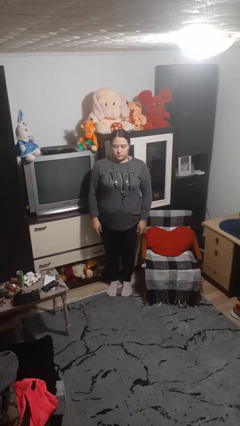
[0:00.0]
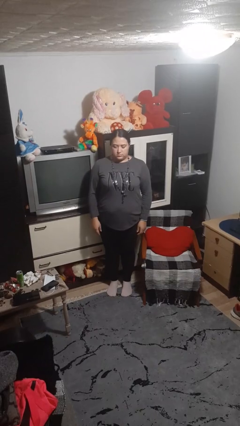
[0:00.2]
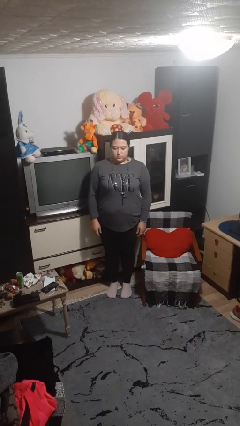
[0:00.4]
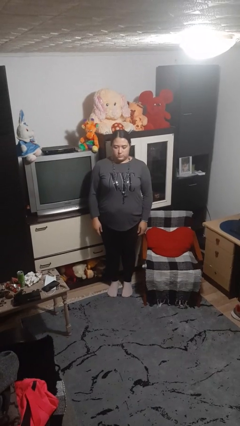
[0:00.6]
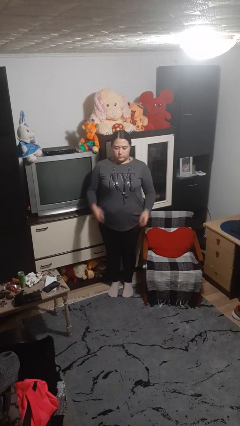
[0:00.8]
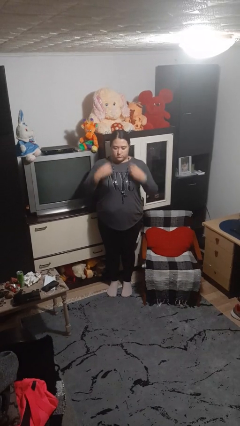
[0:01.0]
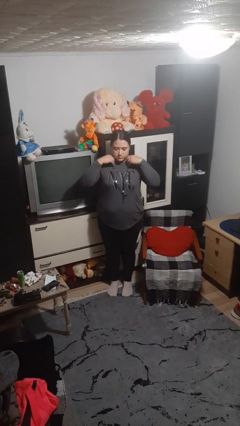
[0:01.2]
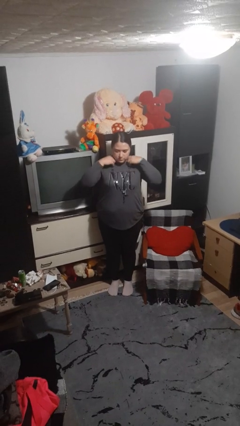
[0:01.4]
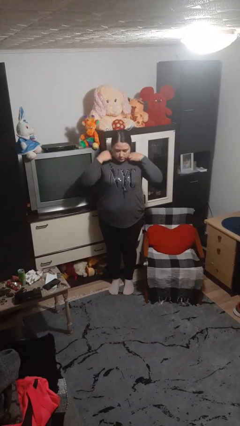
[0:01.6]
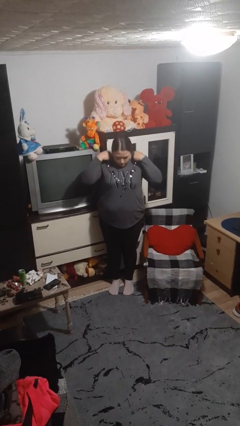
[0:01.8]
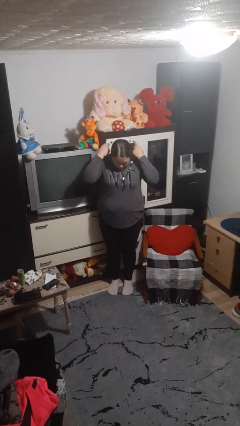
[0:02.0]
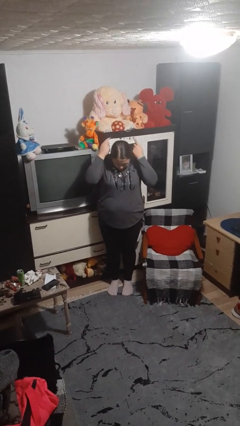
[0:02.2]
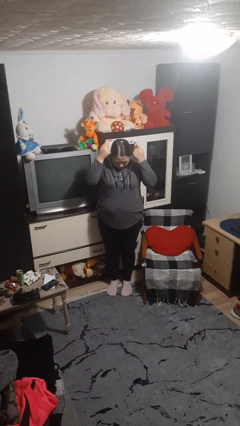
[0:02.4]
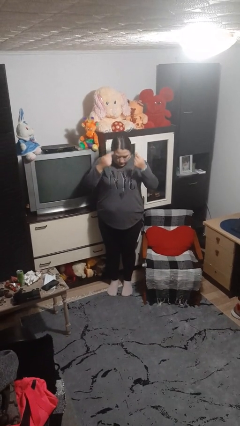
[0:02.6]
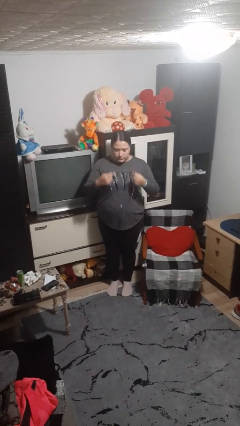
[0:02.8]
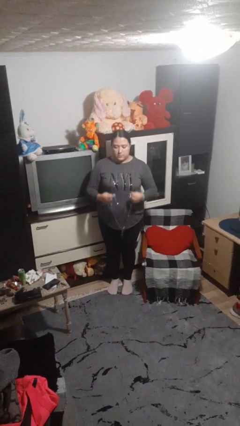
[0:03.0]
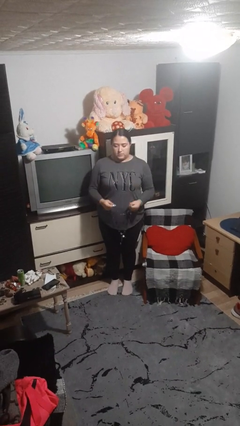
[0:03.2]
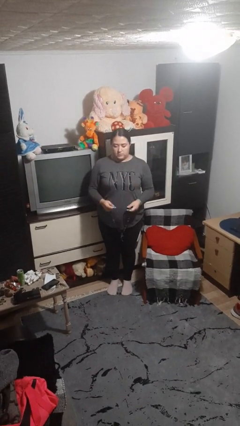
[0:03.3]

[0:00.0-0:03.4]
person takes off necklace

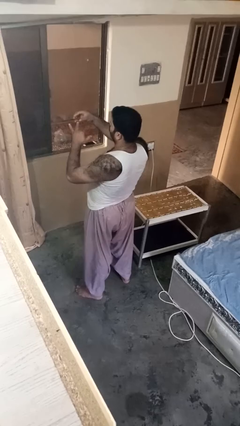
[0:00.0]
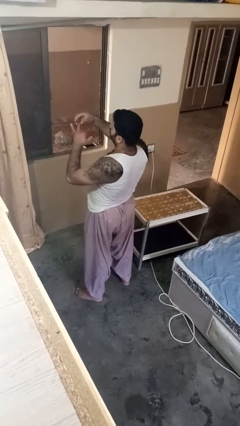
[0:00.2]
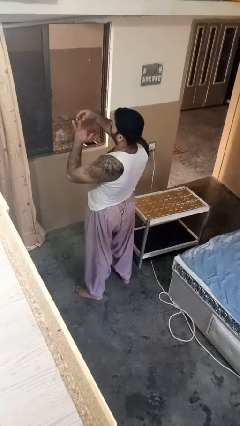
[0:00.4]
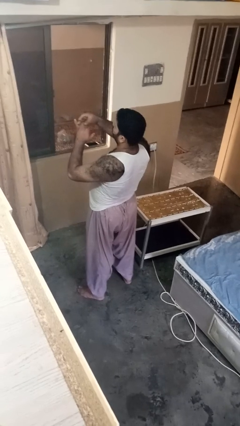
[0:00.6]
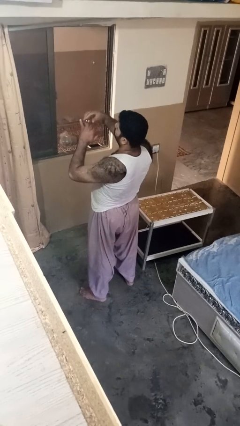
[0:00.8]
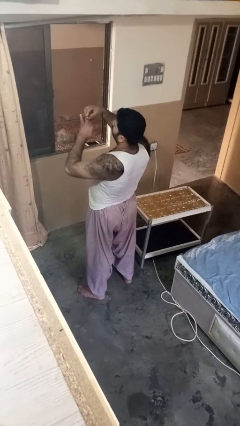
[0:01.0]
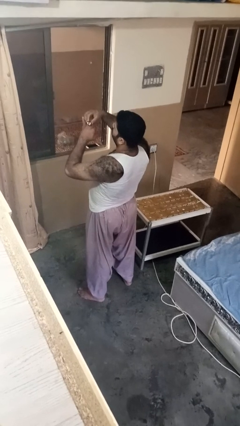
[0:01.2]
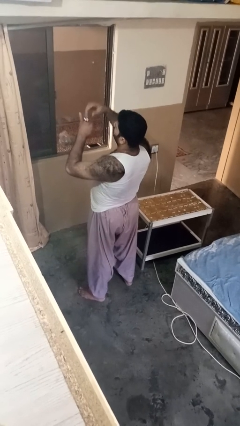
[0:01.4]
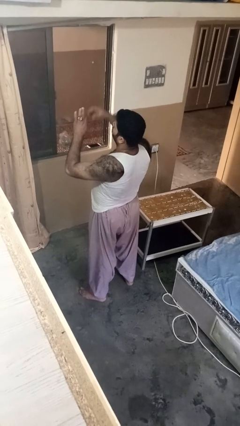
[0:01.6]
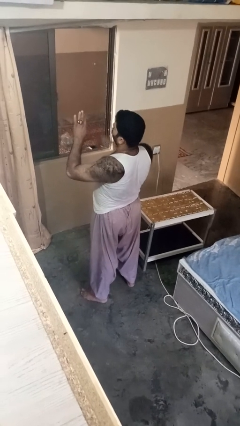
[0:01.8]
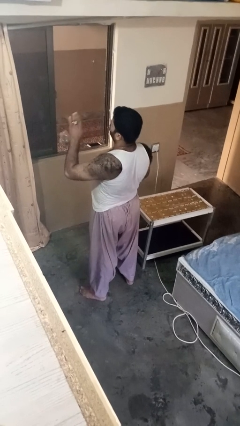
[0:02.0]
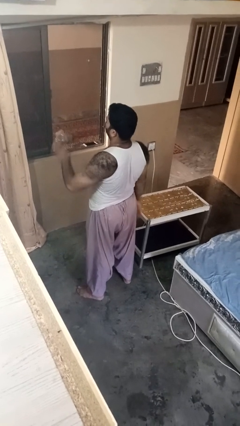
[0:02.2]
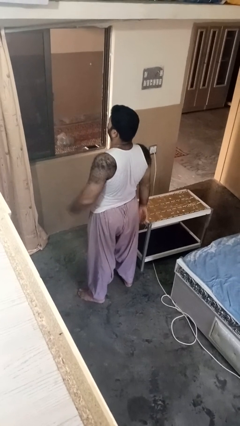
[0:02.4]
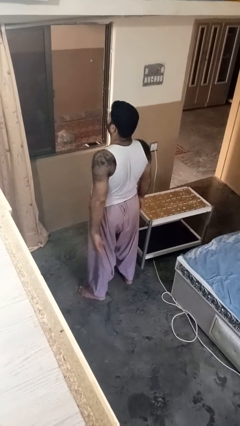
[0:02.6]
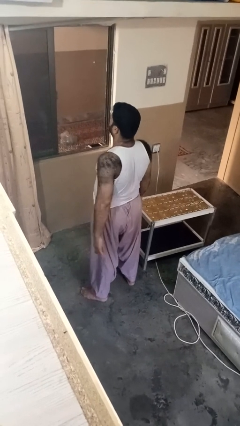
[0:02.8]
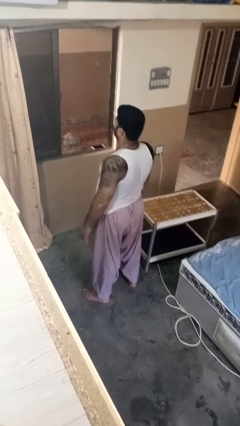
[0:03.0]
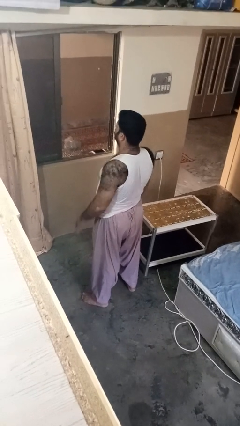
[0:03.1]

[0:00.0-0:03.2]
person puts on ring

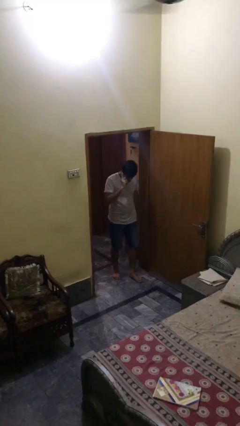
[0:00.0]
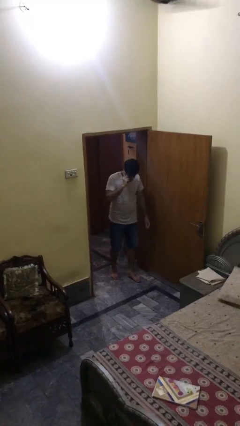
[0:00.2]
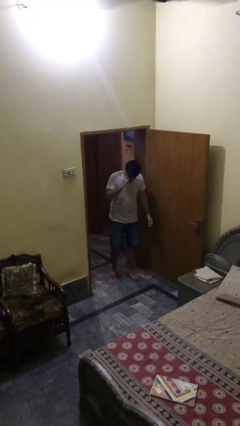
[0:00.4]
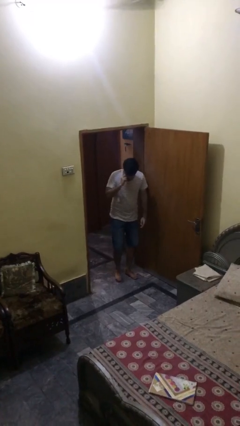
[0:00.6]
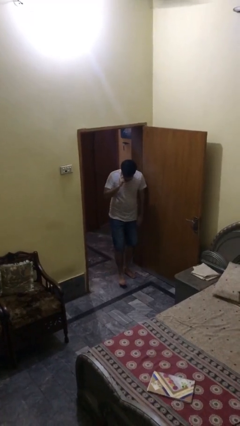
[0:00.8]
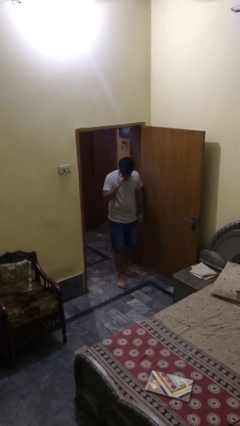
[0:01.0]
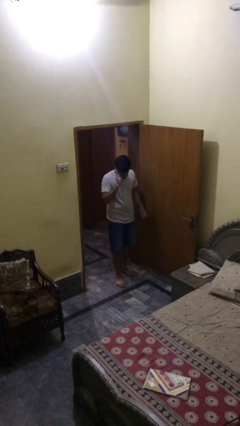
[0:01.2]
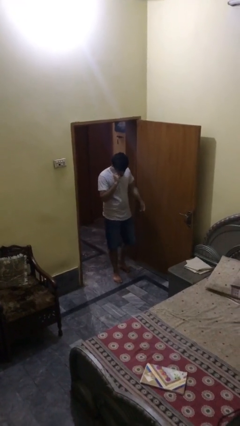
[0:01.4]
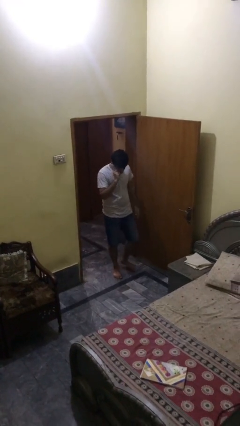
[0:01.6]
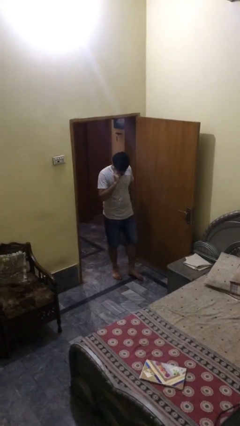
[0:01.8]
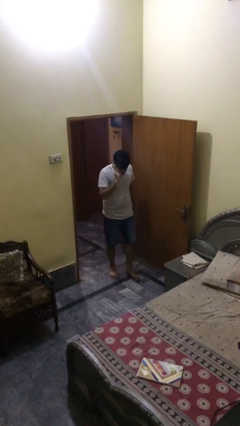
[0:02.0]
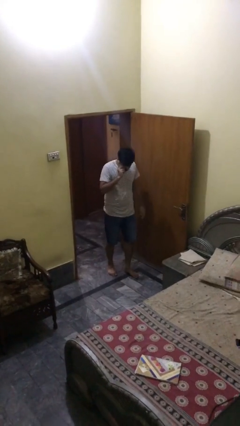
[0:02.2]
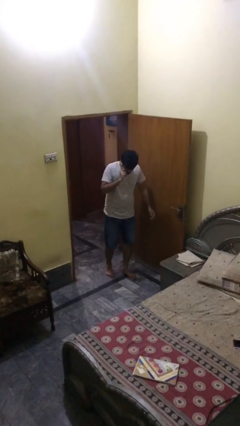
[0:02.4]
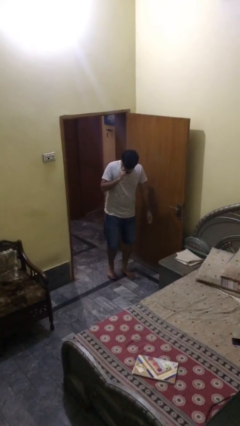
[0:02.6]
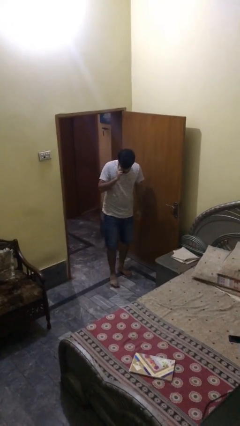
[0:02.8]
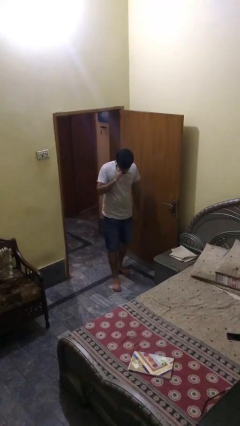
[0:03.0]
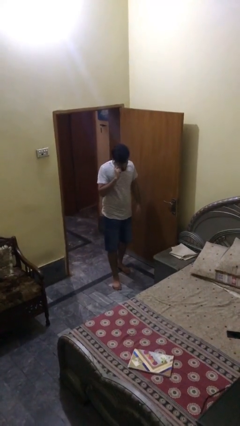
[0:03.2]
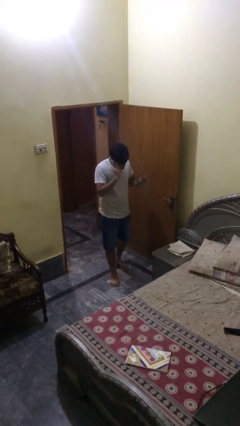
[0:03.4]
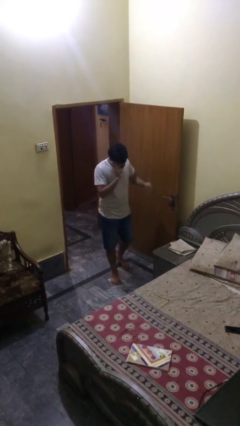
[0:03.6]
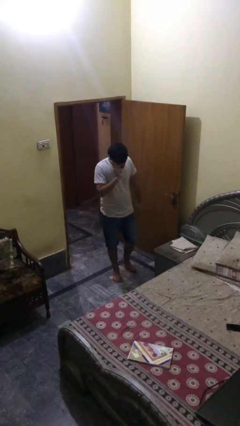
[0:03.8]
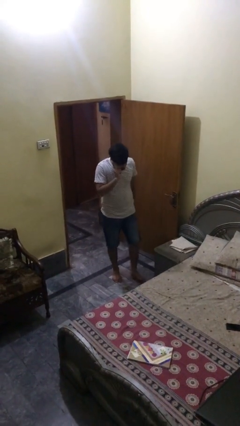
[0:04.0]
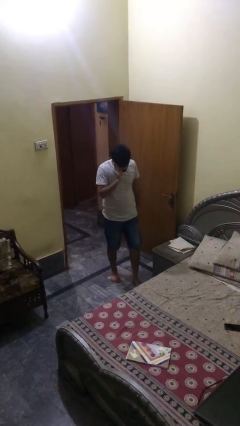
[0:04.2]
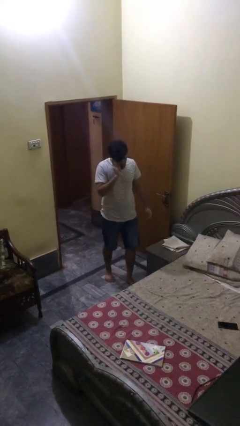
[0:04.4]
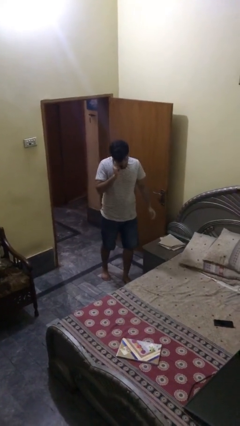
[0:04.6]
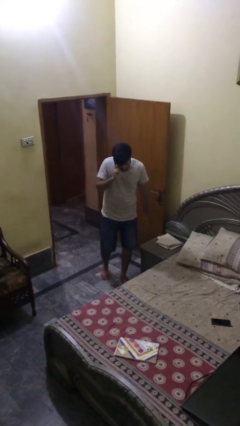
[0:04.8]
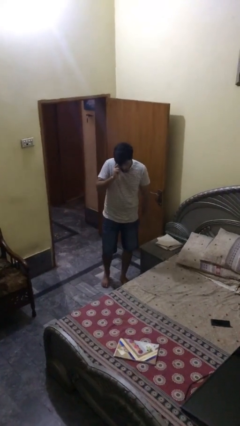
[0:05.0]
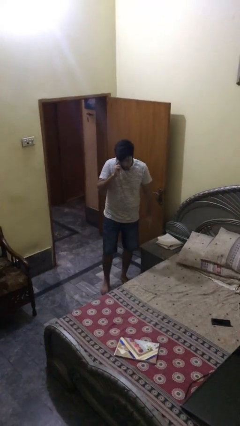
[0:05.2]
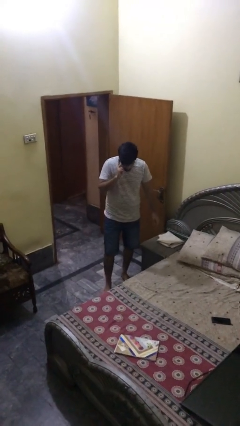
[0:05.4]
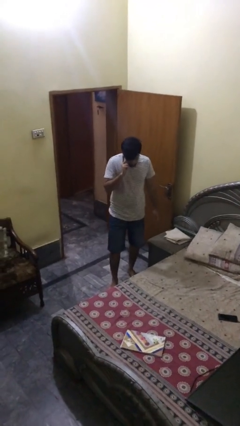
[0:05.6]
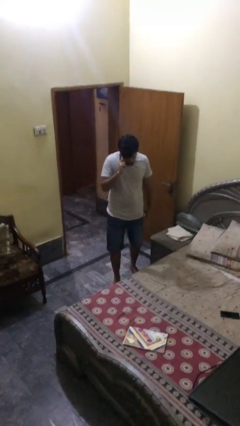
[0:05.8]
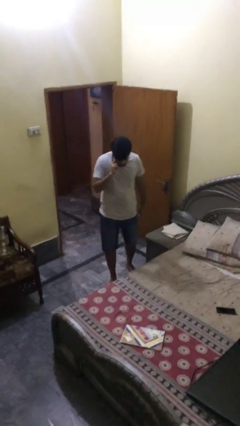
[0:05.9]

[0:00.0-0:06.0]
person enters scene through structure

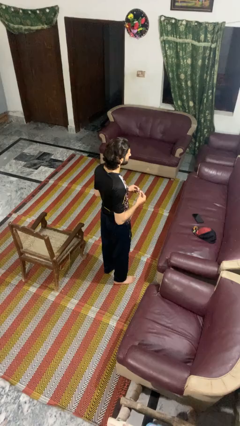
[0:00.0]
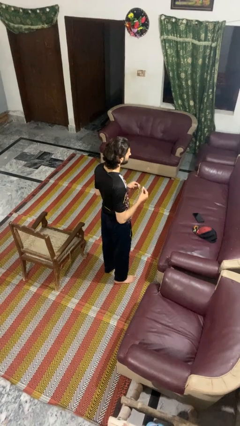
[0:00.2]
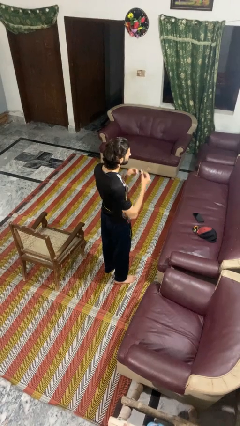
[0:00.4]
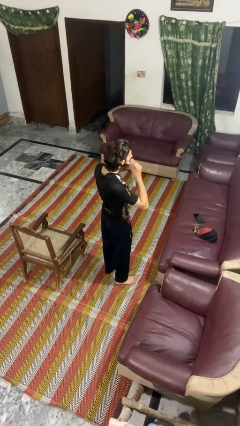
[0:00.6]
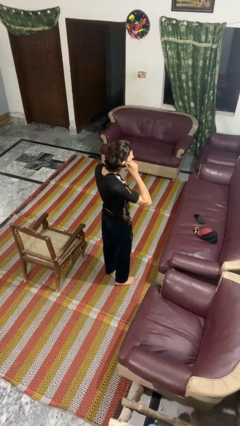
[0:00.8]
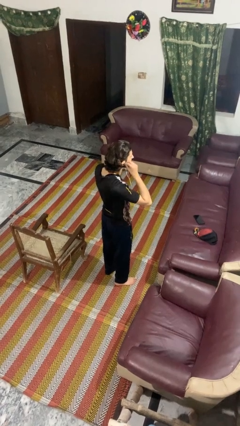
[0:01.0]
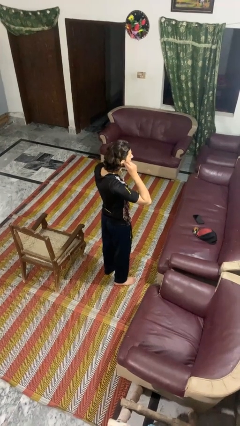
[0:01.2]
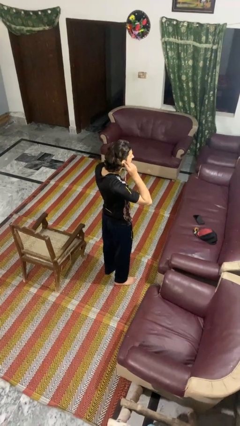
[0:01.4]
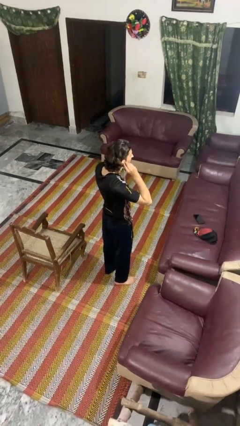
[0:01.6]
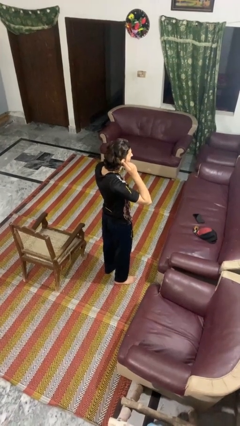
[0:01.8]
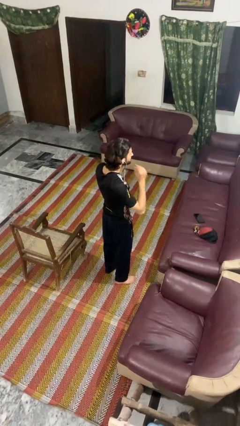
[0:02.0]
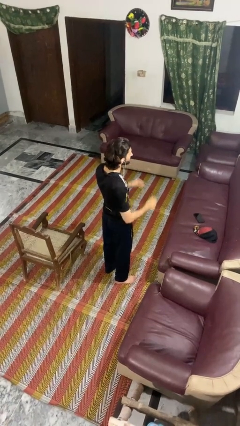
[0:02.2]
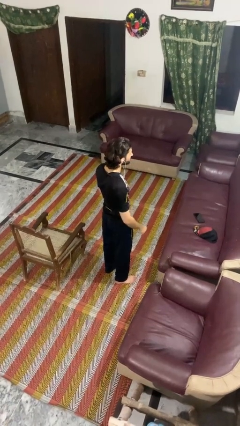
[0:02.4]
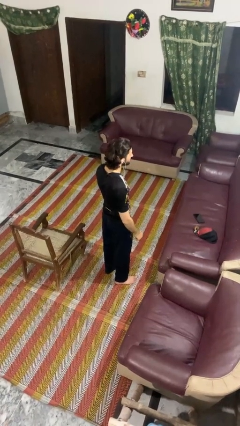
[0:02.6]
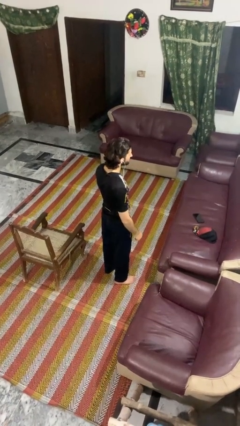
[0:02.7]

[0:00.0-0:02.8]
person puts on headphones

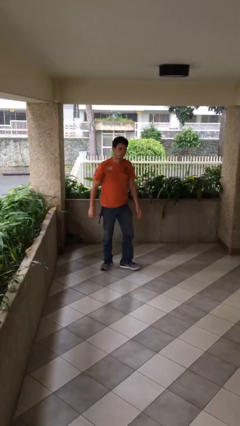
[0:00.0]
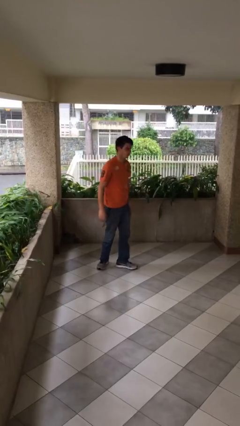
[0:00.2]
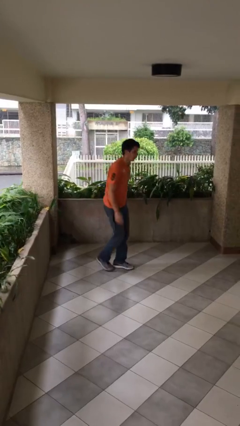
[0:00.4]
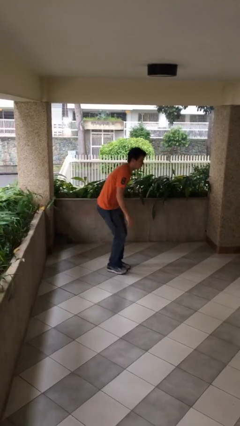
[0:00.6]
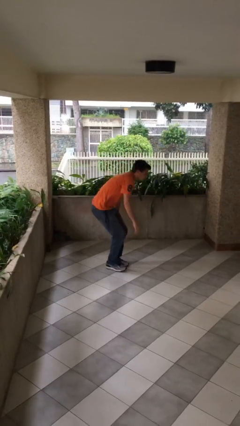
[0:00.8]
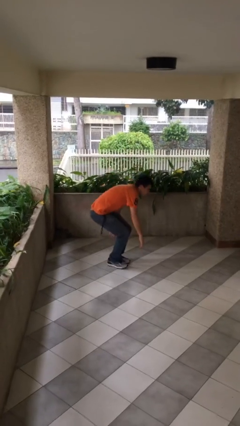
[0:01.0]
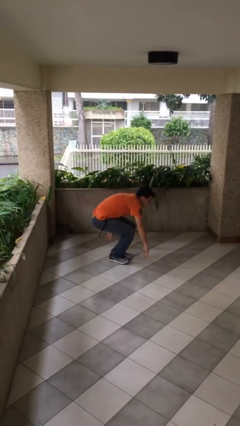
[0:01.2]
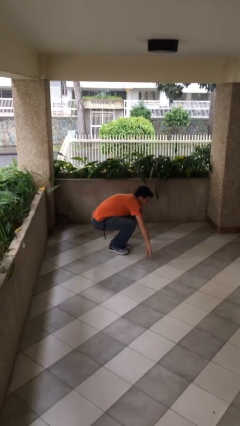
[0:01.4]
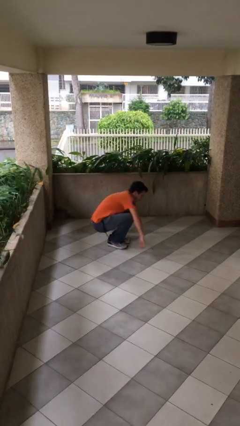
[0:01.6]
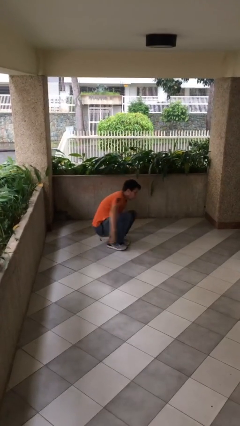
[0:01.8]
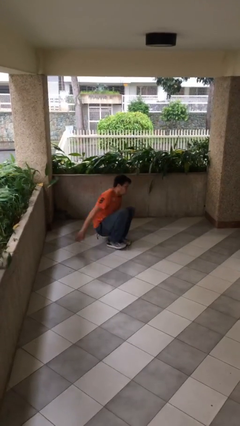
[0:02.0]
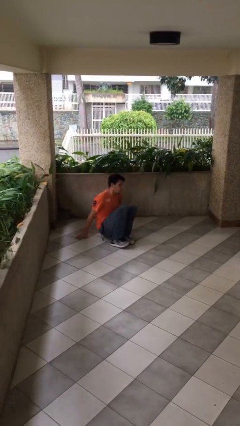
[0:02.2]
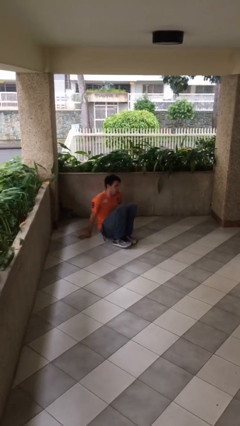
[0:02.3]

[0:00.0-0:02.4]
person sits down
